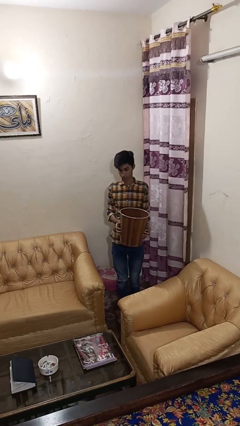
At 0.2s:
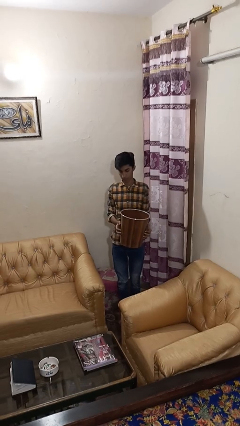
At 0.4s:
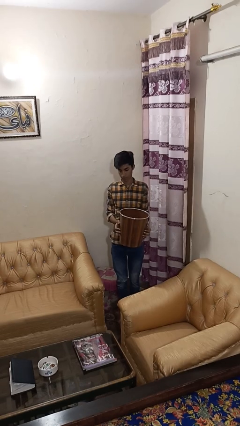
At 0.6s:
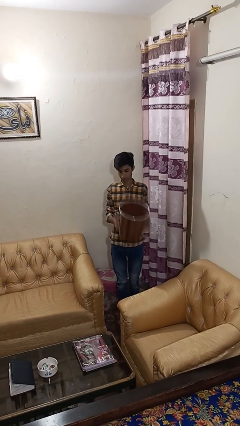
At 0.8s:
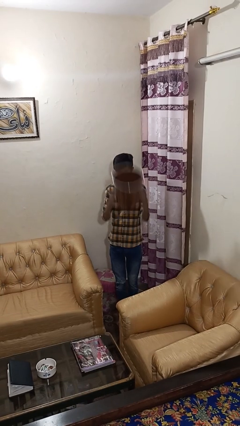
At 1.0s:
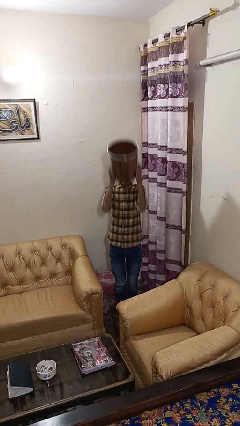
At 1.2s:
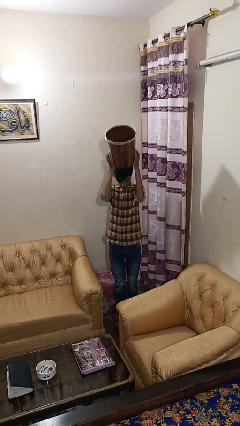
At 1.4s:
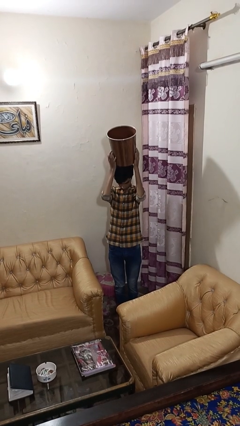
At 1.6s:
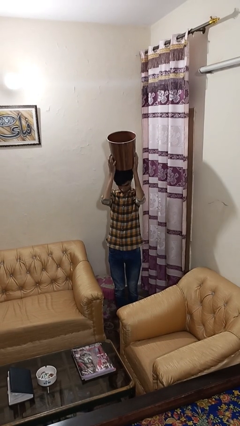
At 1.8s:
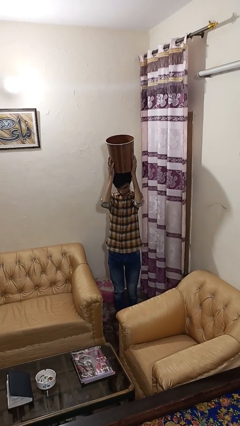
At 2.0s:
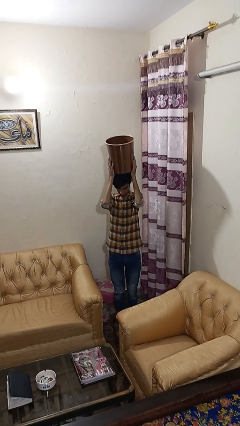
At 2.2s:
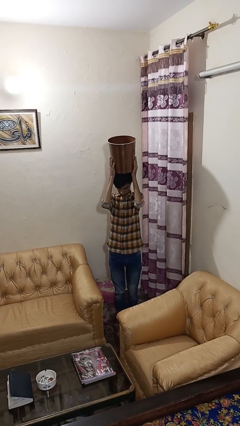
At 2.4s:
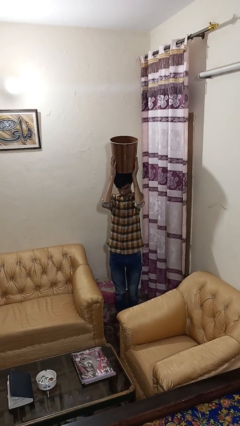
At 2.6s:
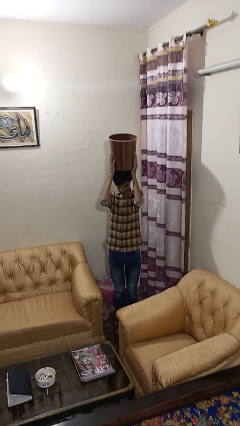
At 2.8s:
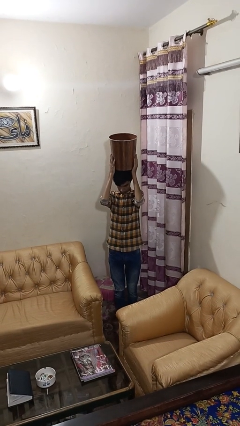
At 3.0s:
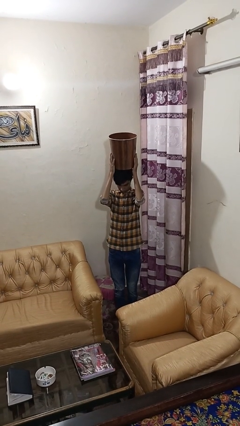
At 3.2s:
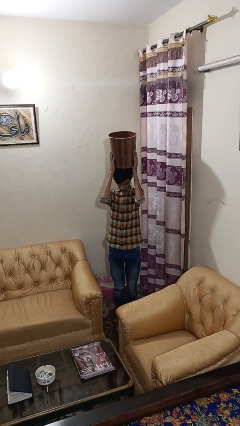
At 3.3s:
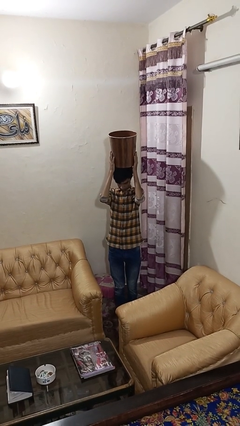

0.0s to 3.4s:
person holds object above head

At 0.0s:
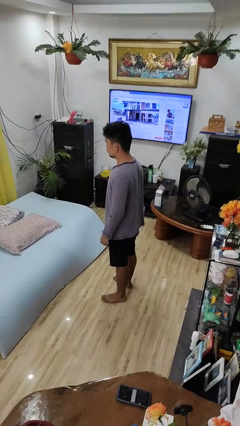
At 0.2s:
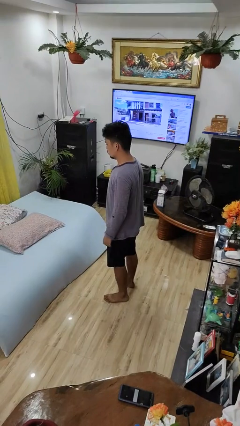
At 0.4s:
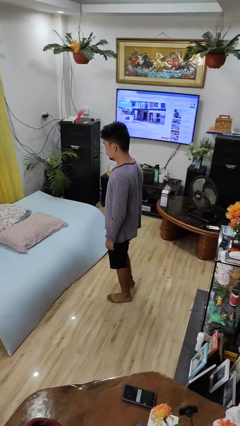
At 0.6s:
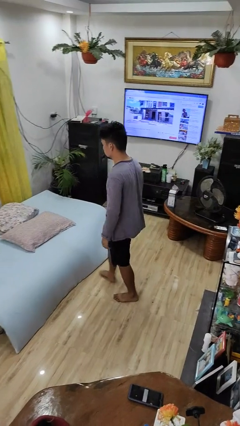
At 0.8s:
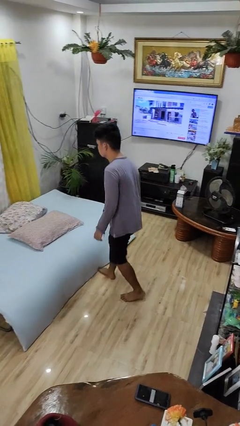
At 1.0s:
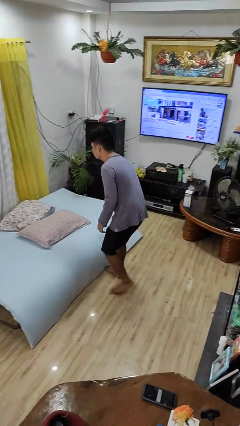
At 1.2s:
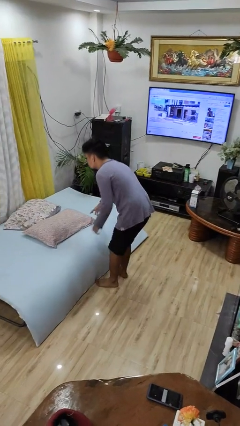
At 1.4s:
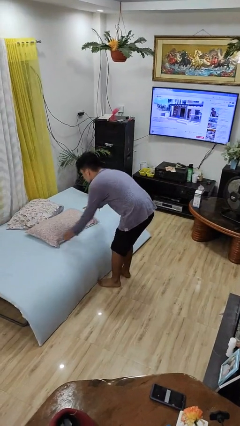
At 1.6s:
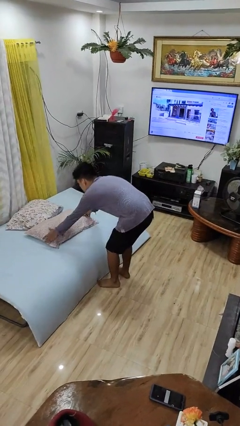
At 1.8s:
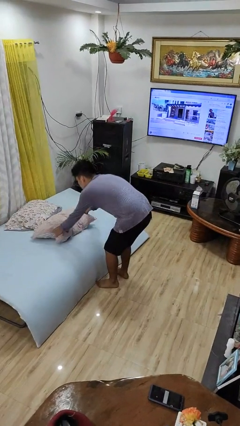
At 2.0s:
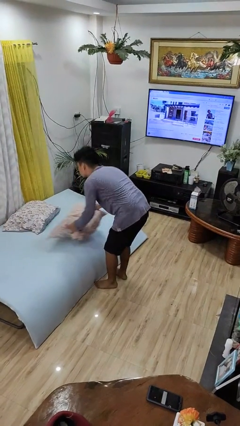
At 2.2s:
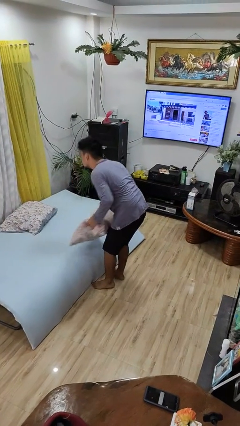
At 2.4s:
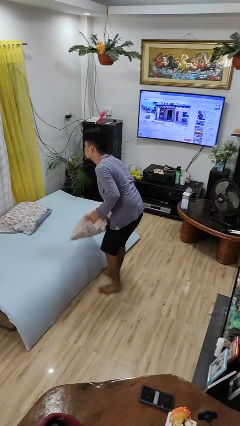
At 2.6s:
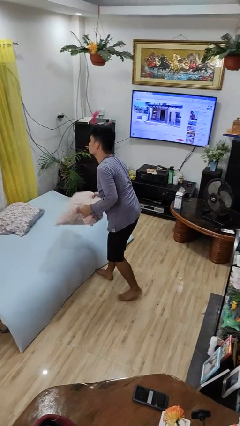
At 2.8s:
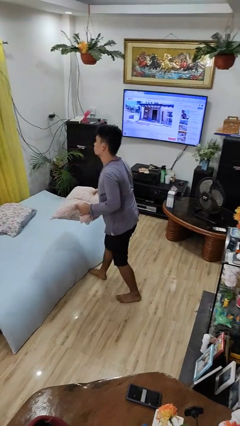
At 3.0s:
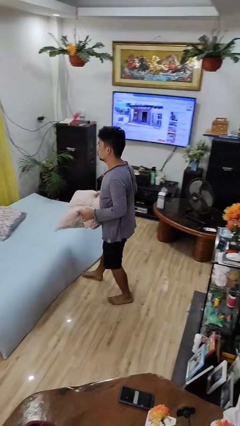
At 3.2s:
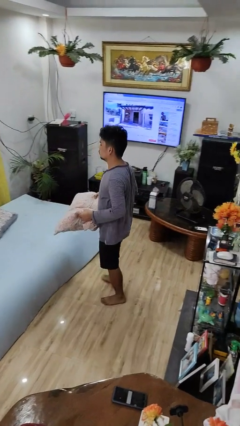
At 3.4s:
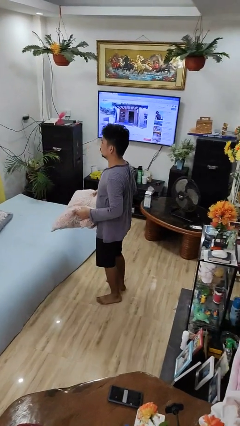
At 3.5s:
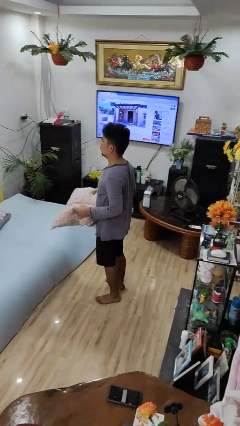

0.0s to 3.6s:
person picks up object from bed

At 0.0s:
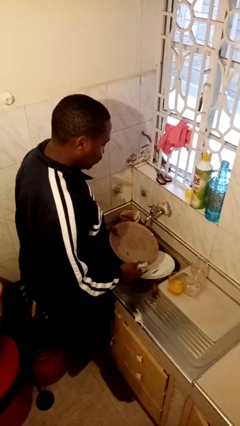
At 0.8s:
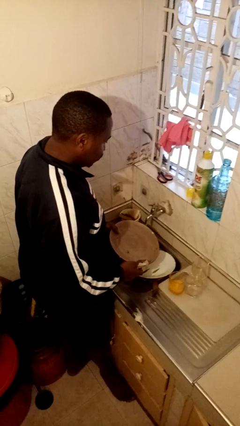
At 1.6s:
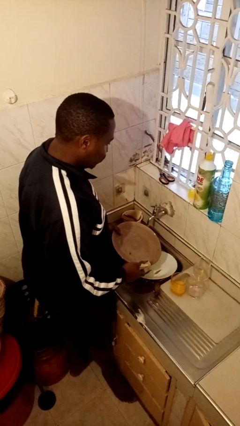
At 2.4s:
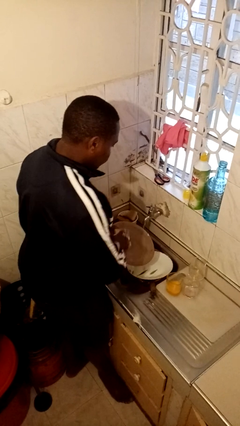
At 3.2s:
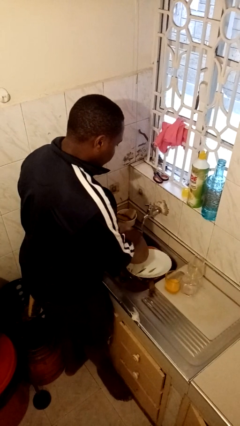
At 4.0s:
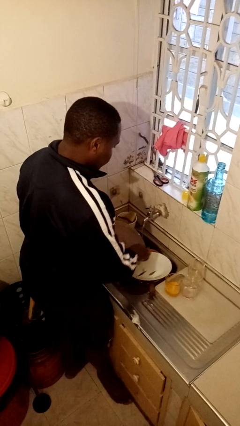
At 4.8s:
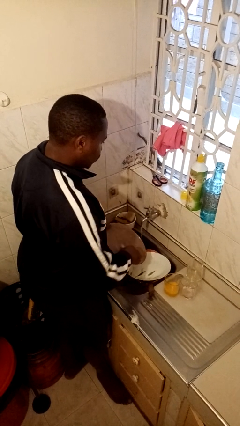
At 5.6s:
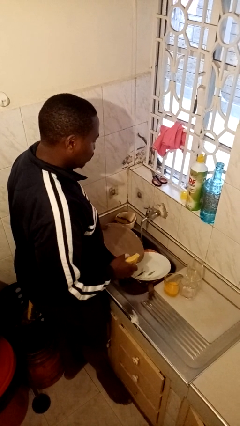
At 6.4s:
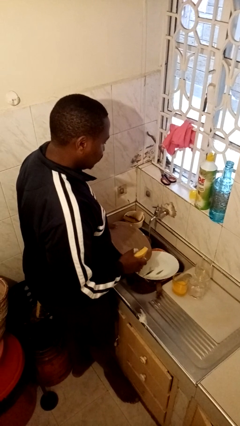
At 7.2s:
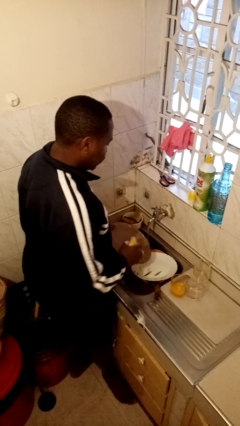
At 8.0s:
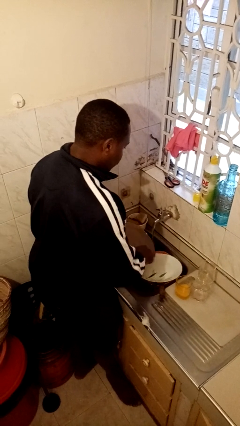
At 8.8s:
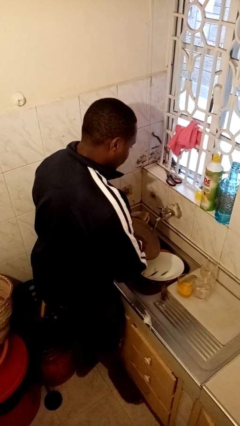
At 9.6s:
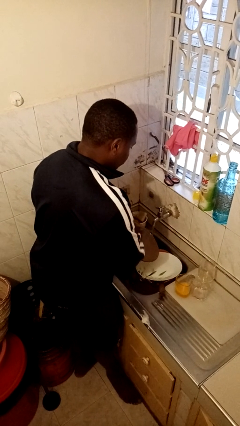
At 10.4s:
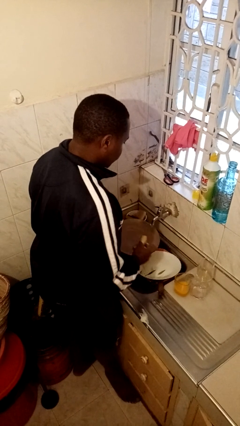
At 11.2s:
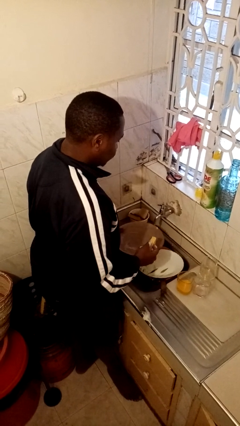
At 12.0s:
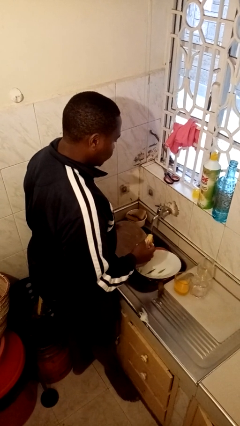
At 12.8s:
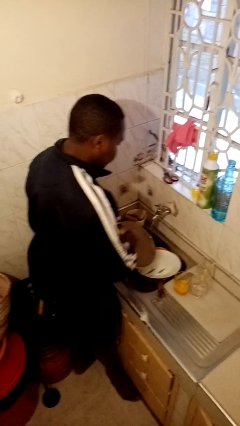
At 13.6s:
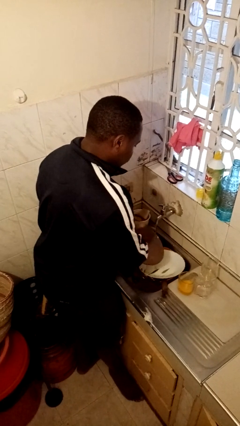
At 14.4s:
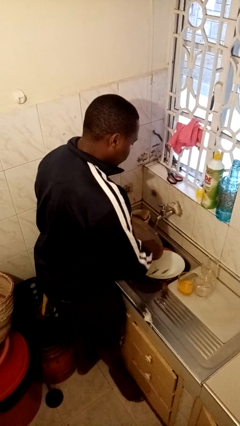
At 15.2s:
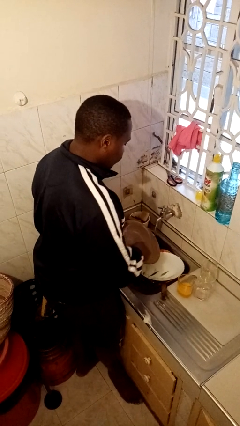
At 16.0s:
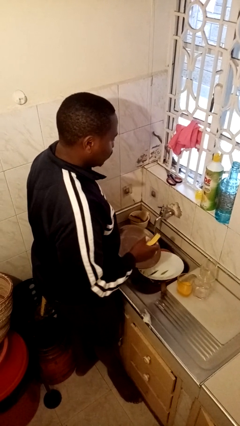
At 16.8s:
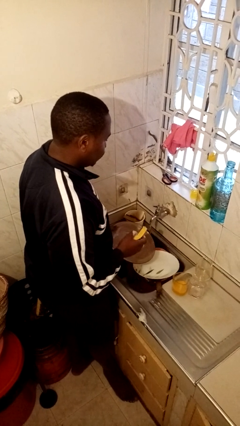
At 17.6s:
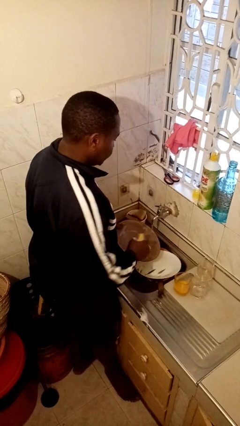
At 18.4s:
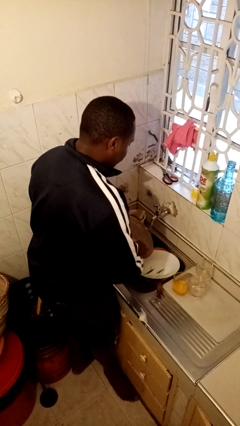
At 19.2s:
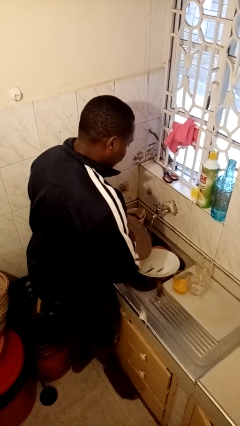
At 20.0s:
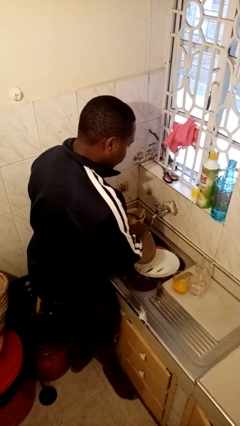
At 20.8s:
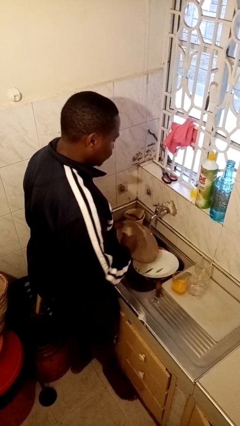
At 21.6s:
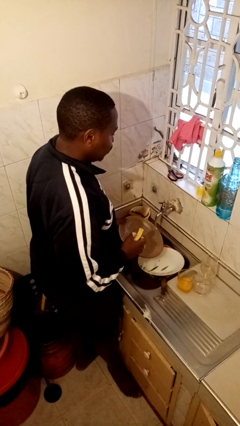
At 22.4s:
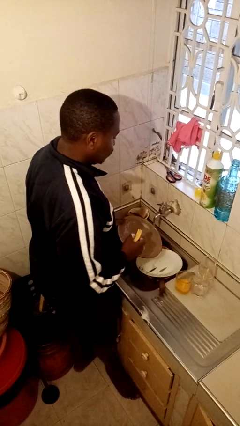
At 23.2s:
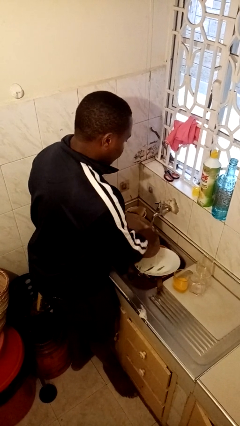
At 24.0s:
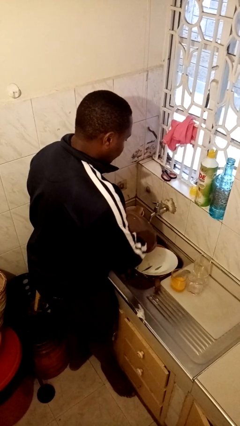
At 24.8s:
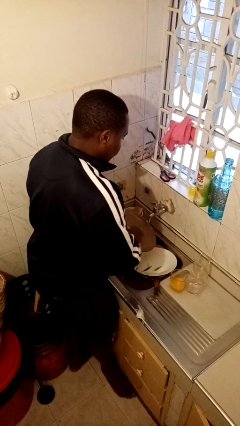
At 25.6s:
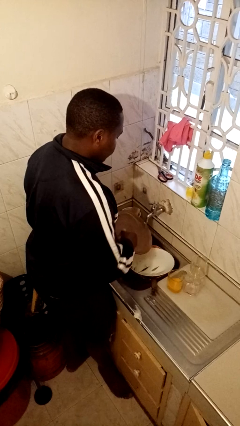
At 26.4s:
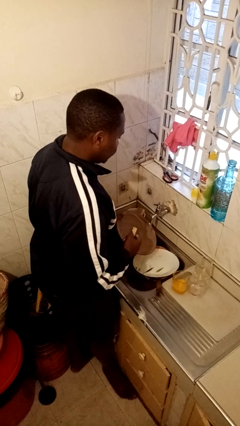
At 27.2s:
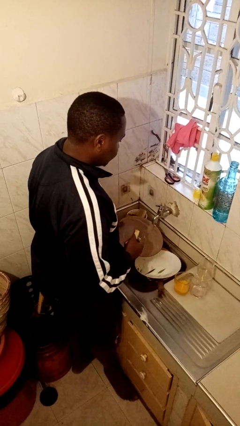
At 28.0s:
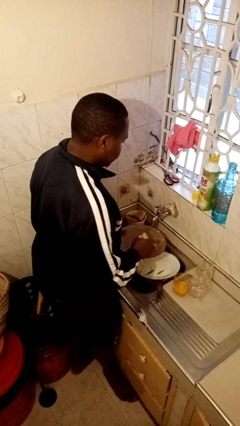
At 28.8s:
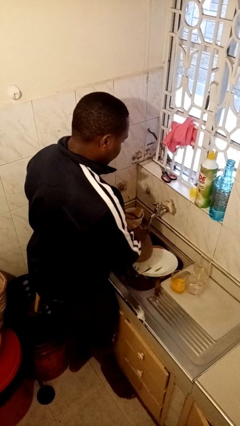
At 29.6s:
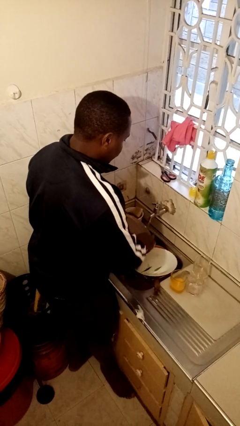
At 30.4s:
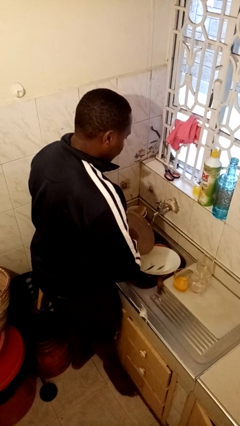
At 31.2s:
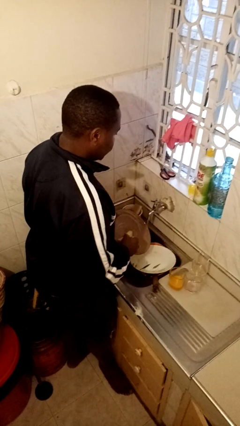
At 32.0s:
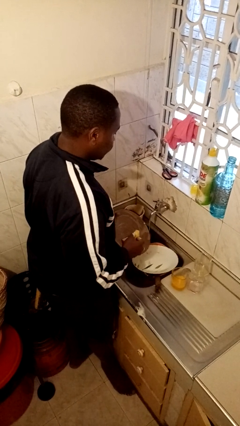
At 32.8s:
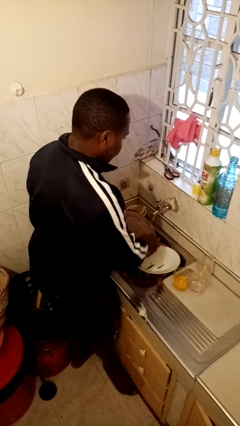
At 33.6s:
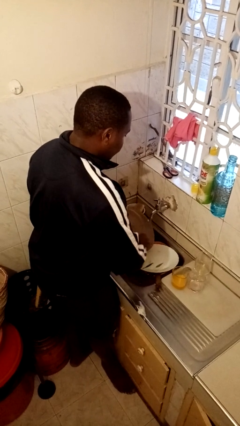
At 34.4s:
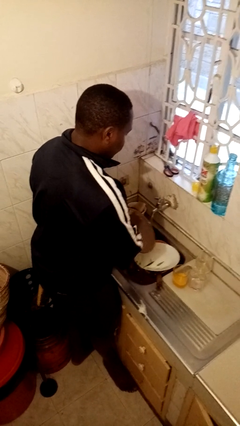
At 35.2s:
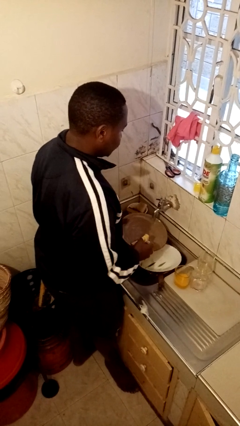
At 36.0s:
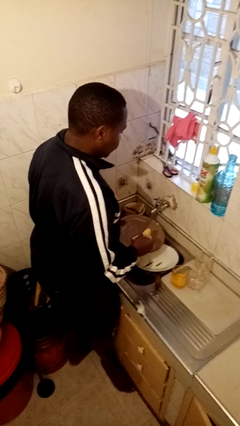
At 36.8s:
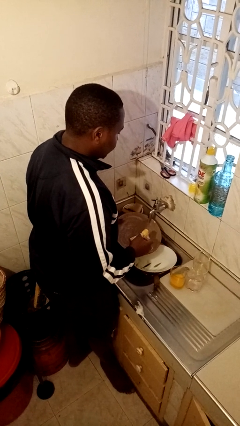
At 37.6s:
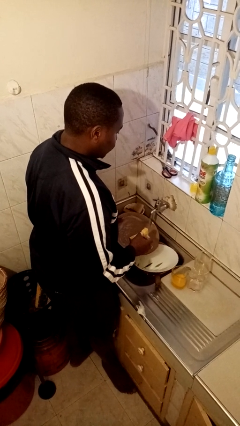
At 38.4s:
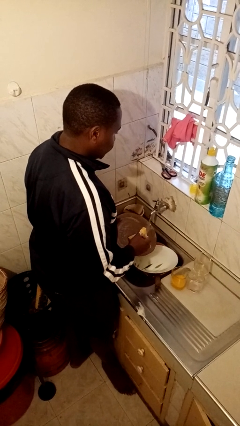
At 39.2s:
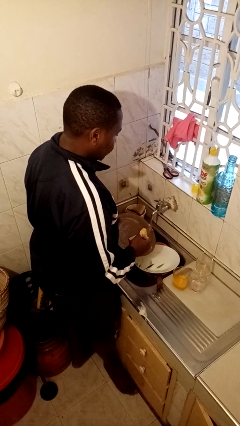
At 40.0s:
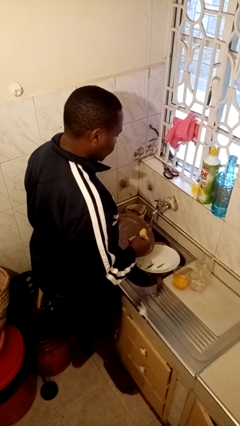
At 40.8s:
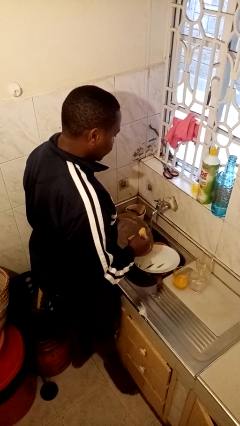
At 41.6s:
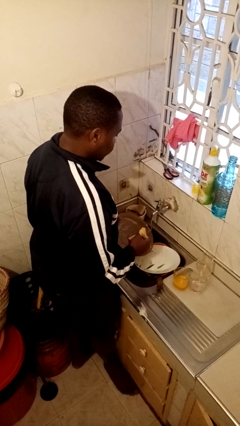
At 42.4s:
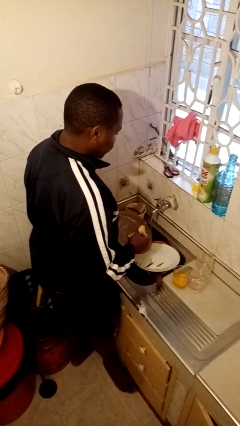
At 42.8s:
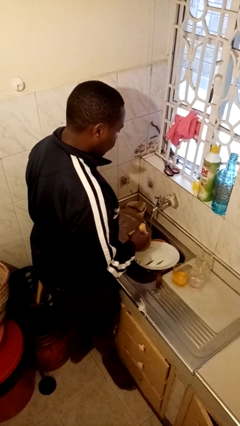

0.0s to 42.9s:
person washes dish

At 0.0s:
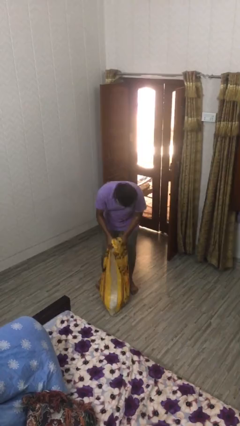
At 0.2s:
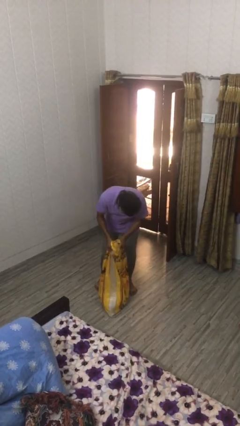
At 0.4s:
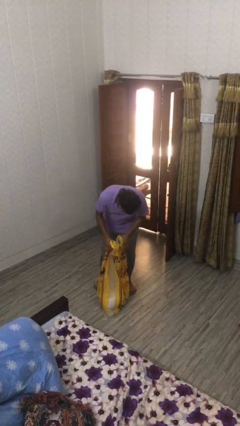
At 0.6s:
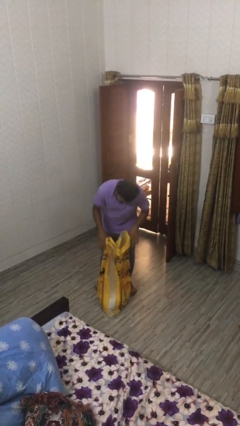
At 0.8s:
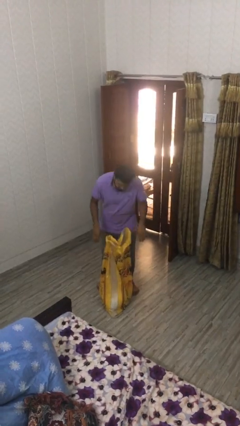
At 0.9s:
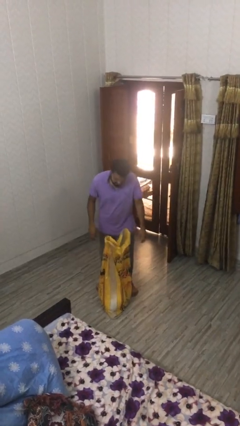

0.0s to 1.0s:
person puts down object on floor
